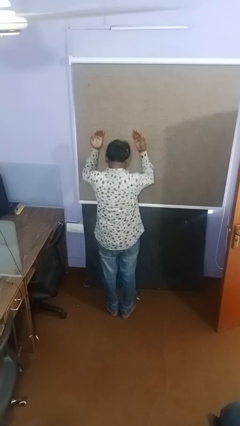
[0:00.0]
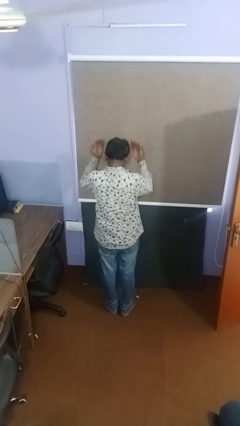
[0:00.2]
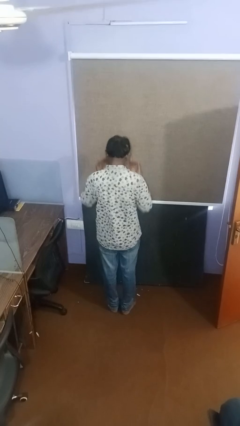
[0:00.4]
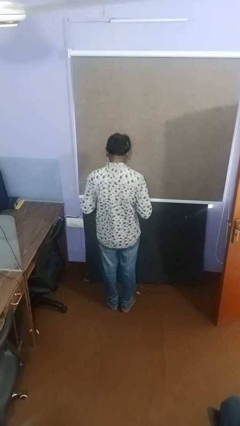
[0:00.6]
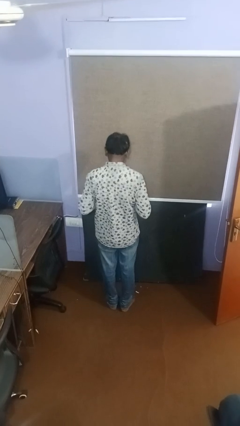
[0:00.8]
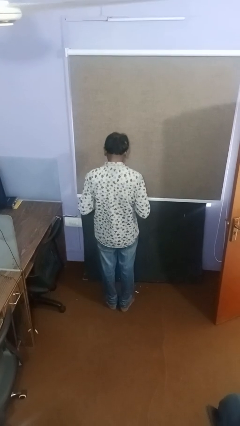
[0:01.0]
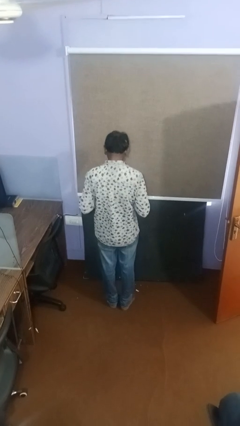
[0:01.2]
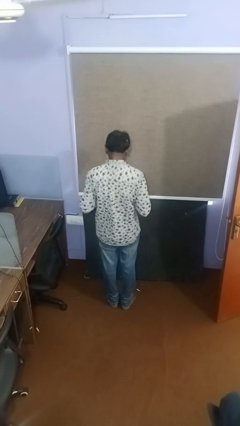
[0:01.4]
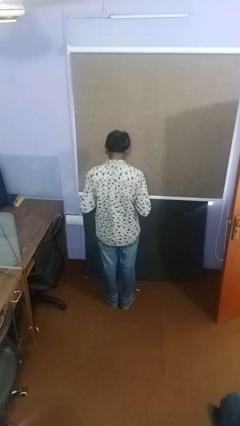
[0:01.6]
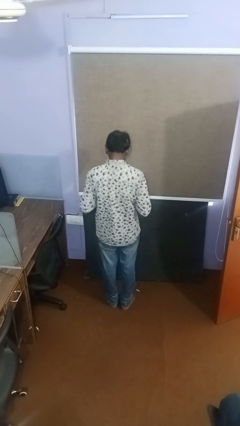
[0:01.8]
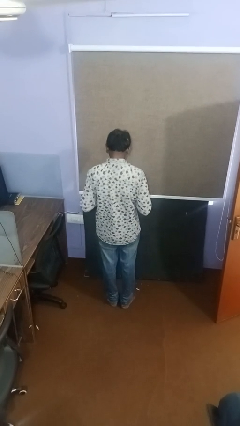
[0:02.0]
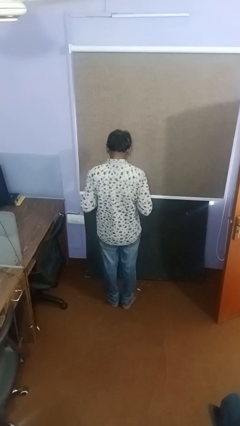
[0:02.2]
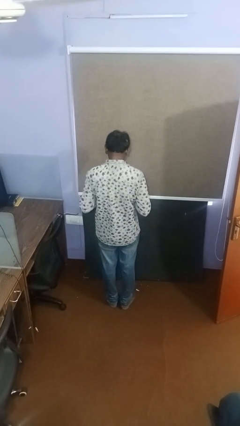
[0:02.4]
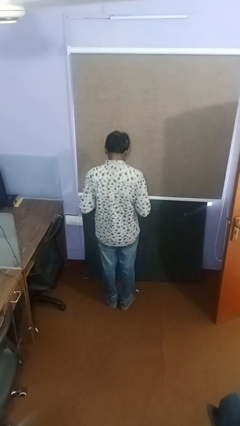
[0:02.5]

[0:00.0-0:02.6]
person gestures swipe down

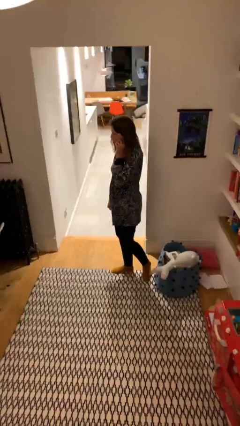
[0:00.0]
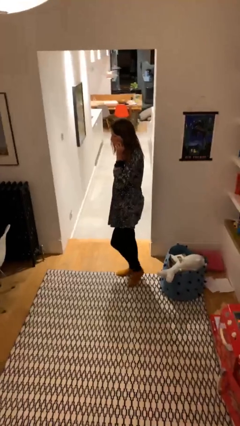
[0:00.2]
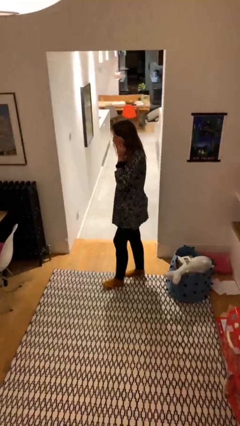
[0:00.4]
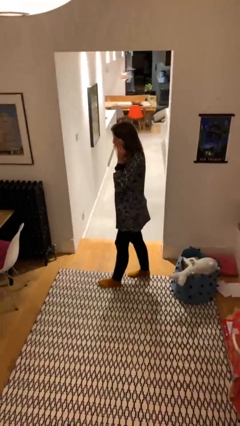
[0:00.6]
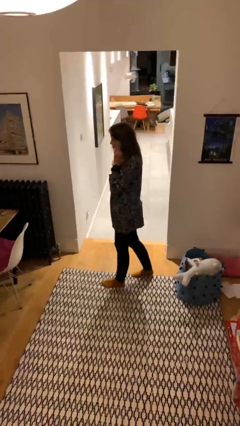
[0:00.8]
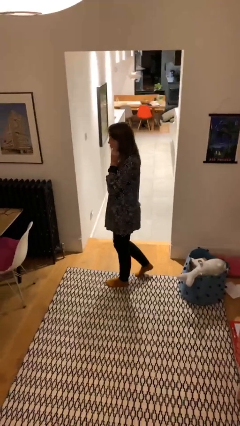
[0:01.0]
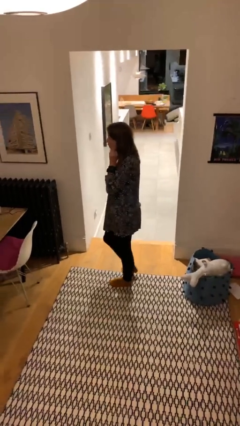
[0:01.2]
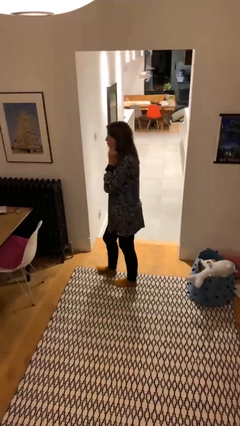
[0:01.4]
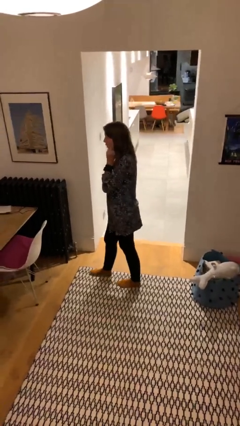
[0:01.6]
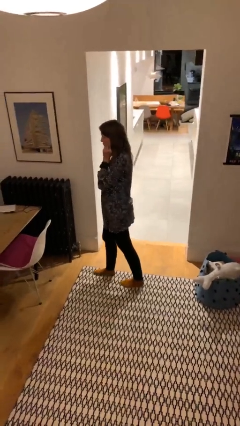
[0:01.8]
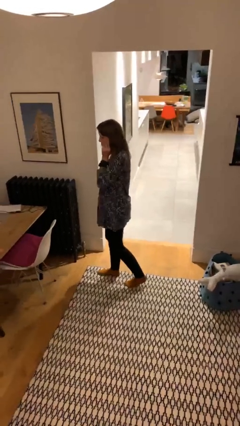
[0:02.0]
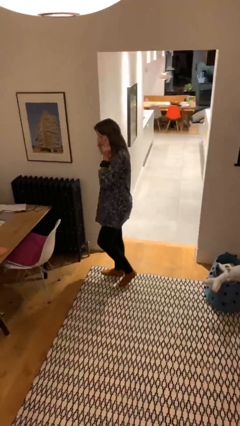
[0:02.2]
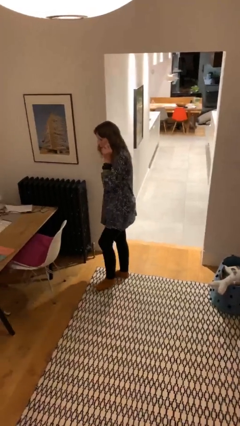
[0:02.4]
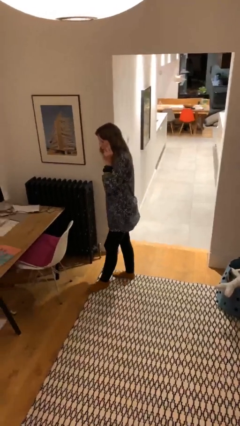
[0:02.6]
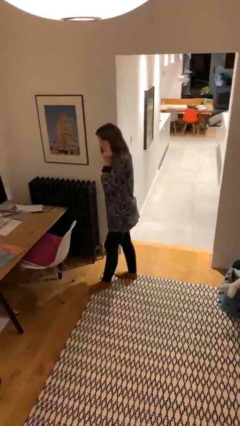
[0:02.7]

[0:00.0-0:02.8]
person talks on phone

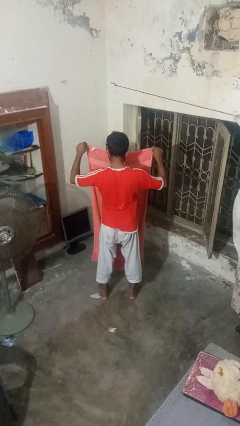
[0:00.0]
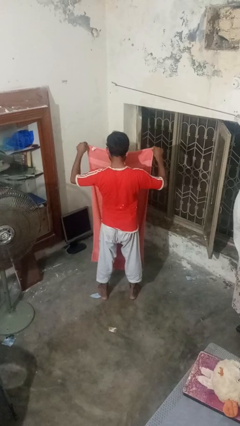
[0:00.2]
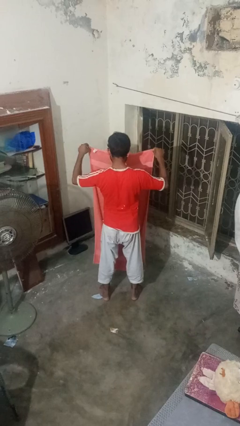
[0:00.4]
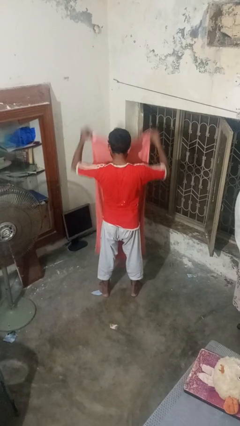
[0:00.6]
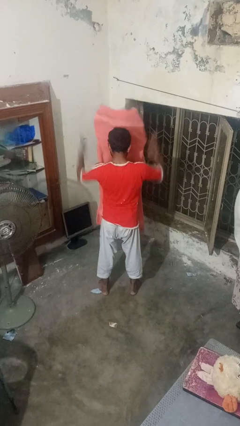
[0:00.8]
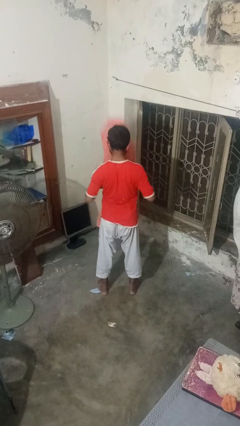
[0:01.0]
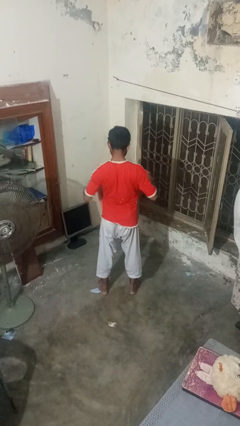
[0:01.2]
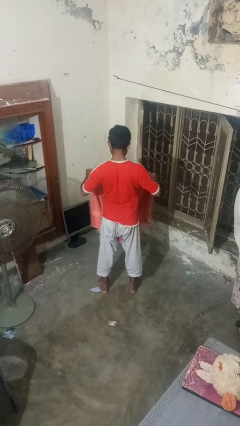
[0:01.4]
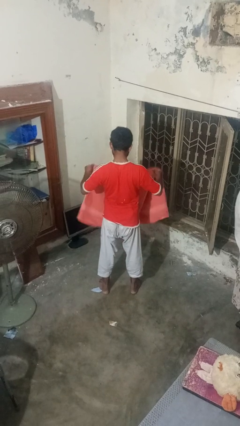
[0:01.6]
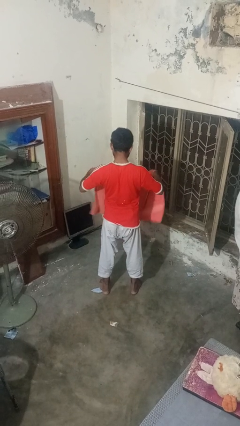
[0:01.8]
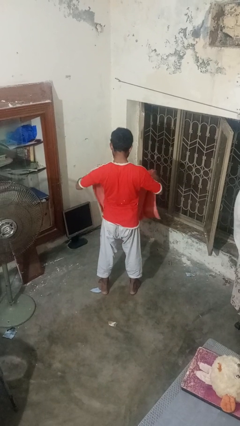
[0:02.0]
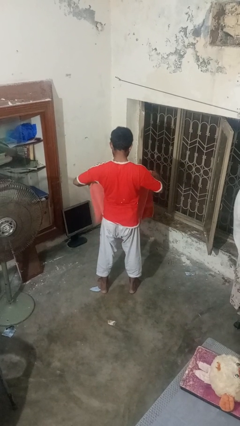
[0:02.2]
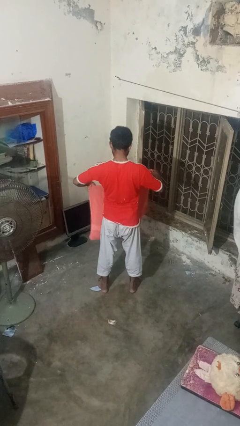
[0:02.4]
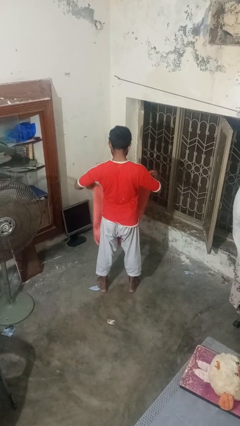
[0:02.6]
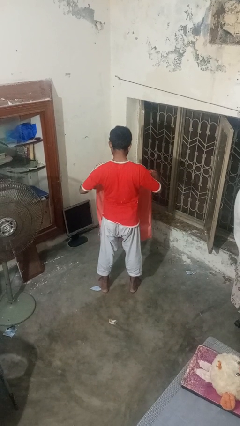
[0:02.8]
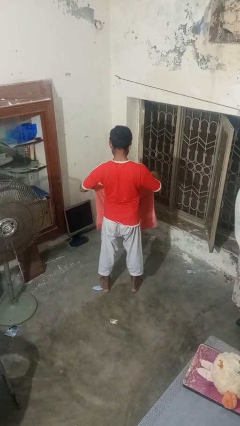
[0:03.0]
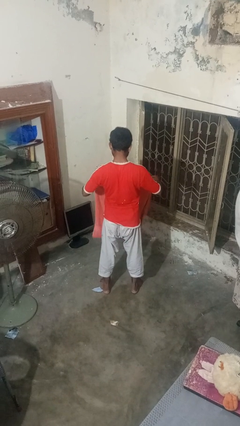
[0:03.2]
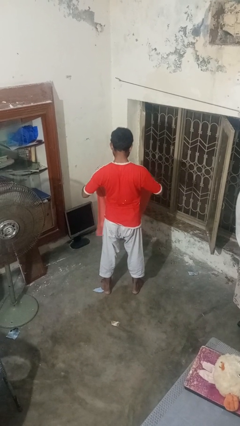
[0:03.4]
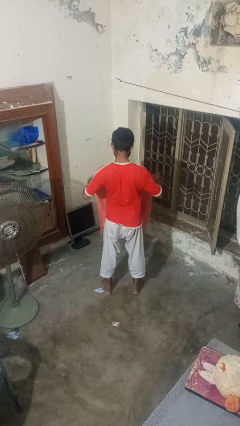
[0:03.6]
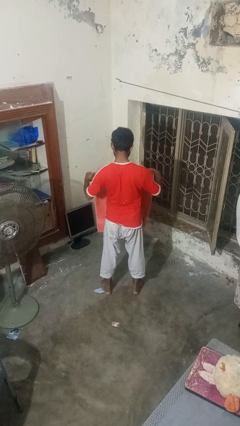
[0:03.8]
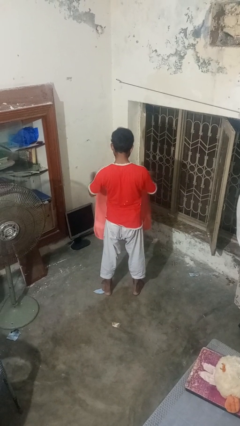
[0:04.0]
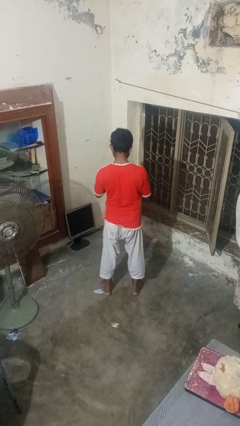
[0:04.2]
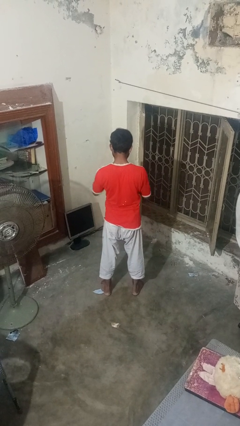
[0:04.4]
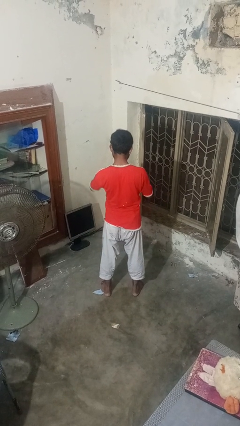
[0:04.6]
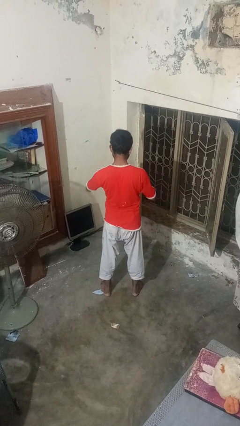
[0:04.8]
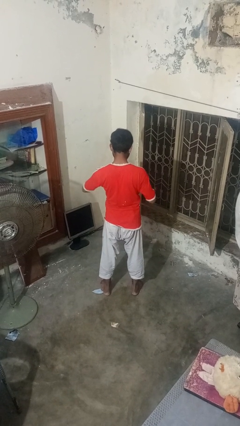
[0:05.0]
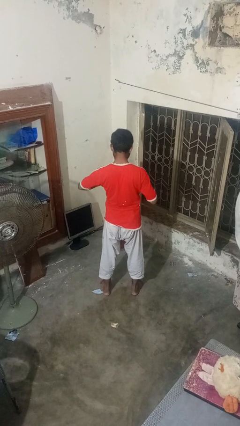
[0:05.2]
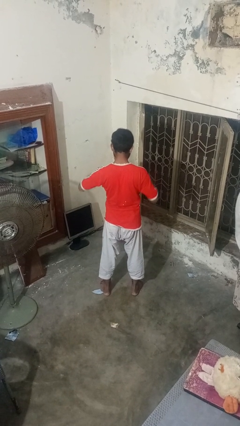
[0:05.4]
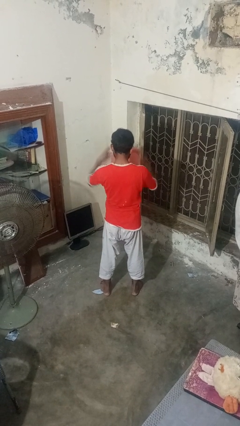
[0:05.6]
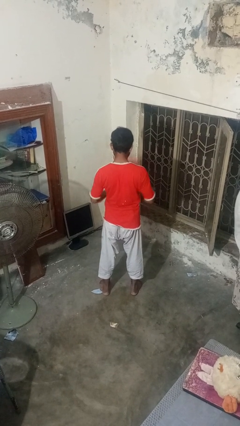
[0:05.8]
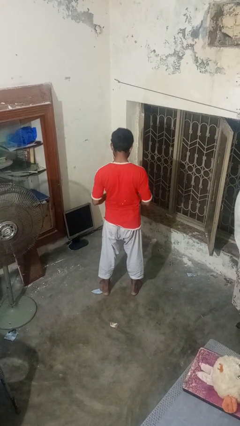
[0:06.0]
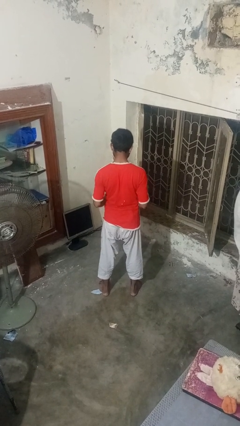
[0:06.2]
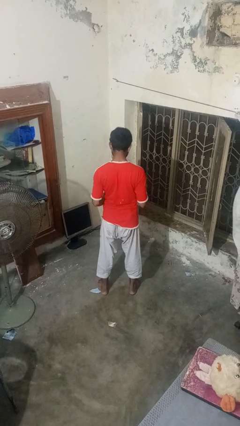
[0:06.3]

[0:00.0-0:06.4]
person folds towel

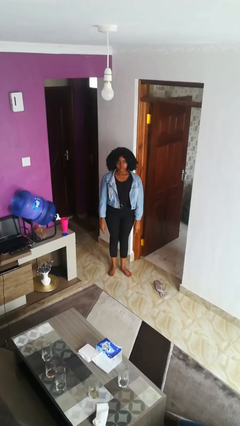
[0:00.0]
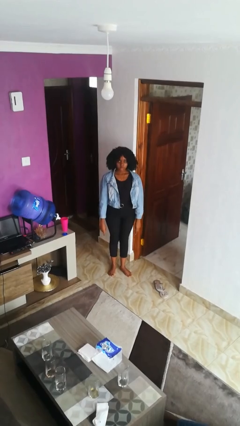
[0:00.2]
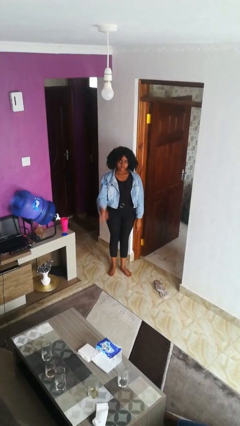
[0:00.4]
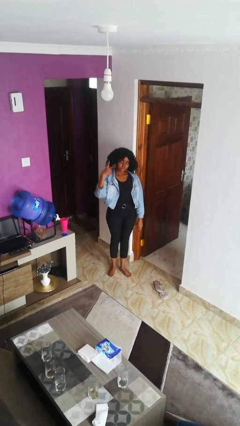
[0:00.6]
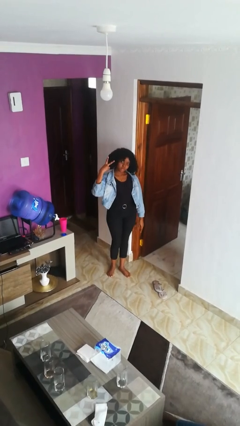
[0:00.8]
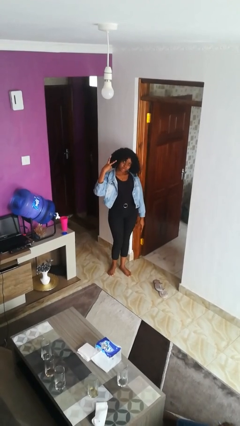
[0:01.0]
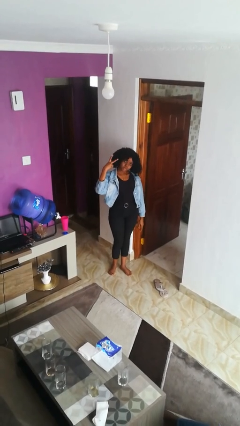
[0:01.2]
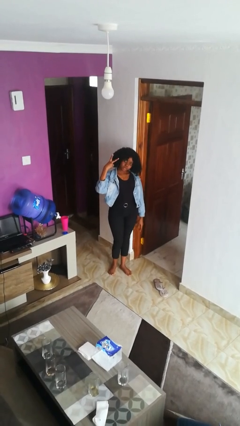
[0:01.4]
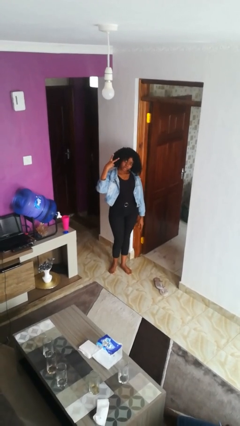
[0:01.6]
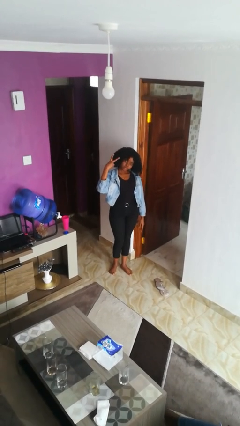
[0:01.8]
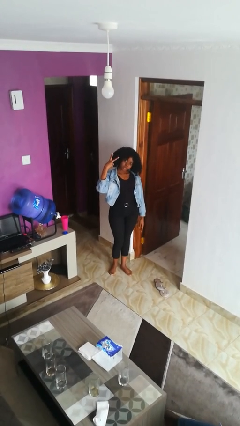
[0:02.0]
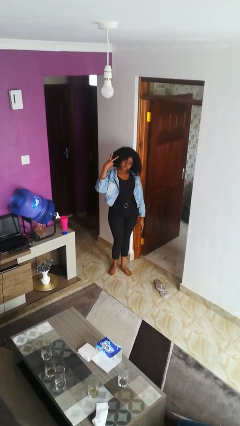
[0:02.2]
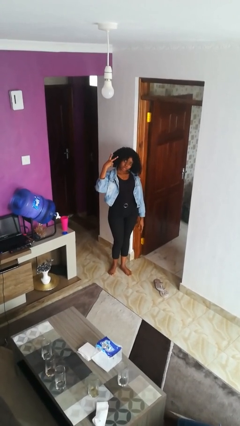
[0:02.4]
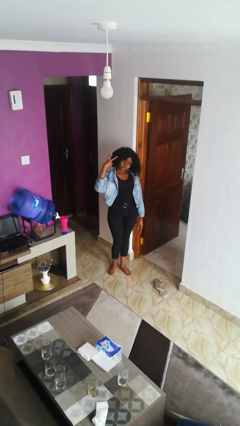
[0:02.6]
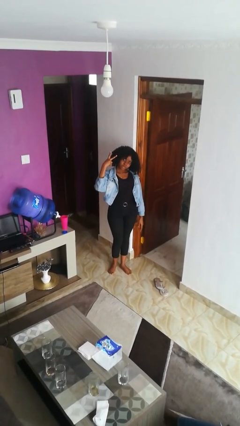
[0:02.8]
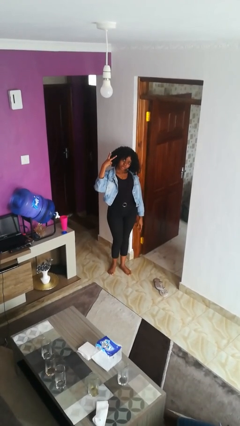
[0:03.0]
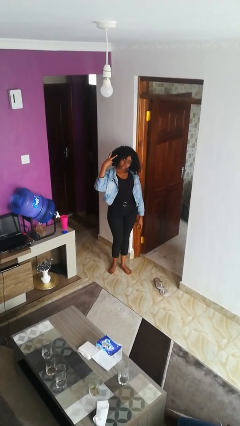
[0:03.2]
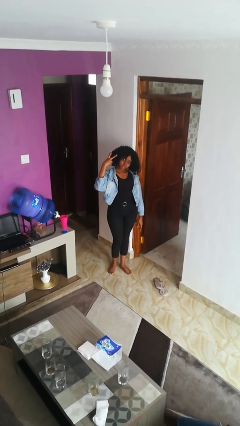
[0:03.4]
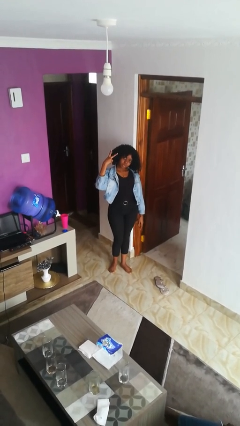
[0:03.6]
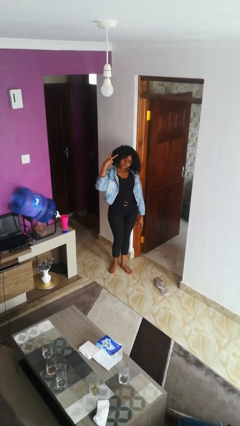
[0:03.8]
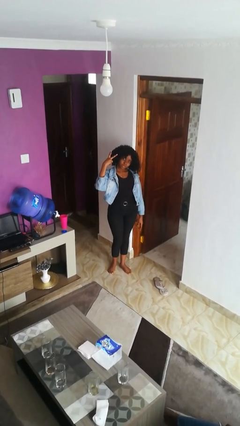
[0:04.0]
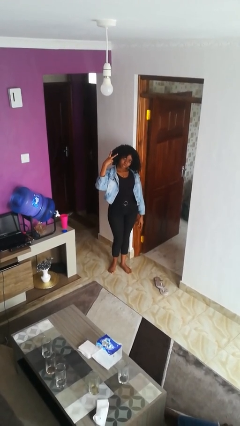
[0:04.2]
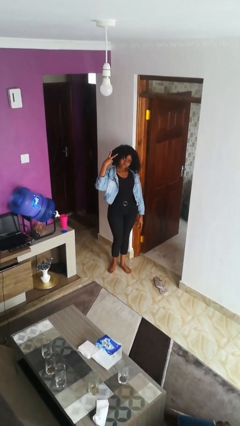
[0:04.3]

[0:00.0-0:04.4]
person gestures peace

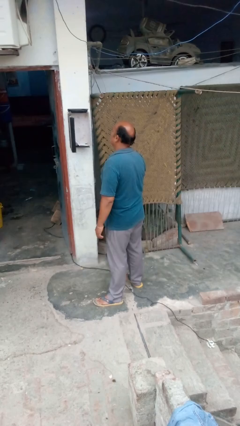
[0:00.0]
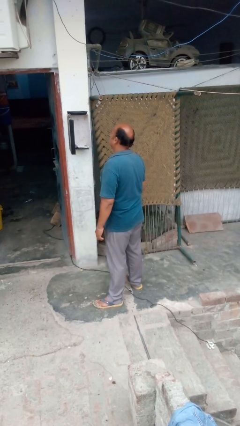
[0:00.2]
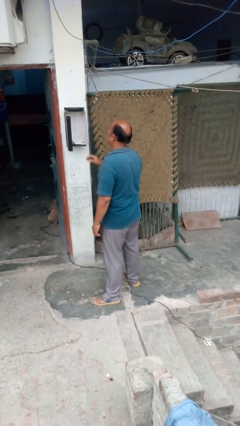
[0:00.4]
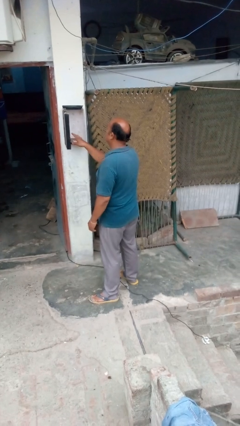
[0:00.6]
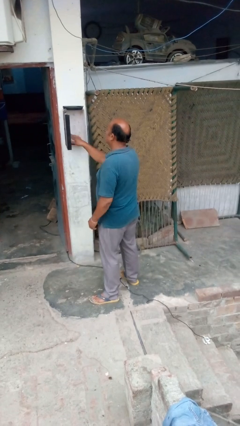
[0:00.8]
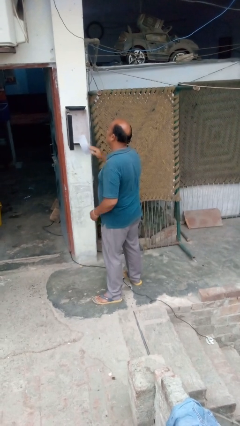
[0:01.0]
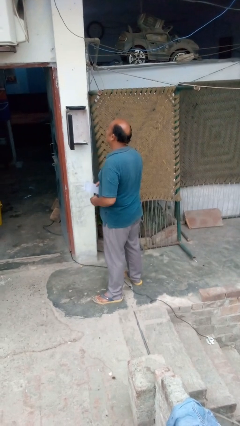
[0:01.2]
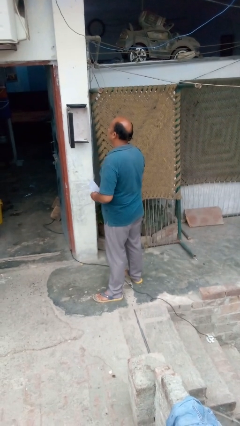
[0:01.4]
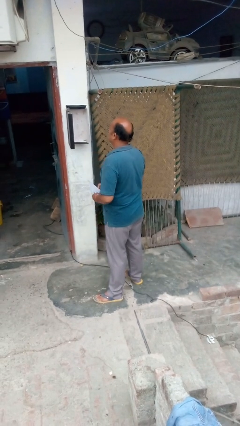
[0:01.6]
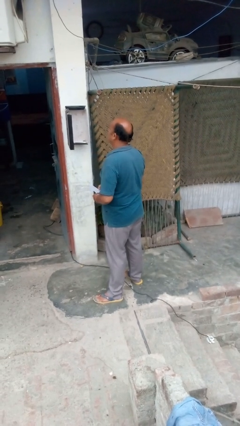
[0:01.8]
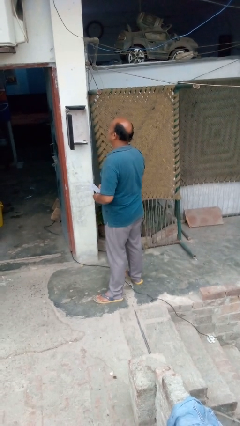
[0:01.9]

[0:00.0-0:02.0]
person takes letters from mailbox
